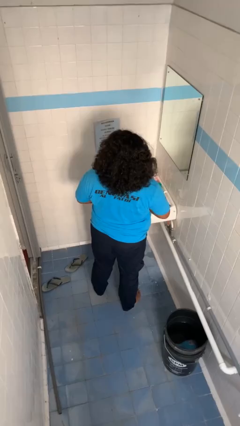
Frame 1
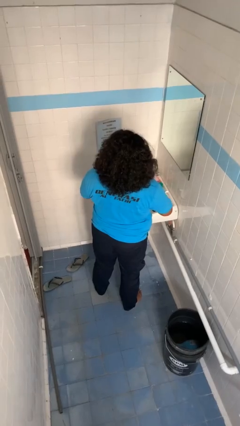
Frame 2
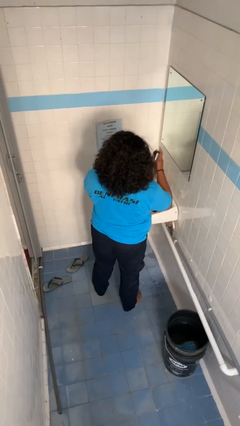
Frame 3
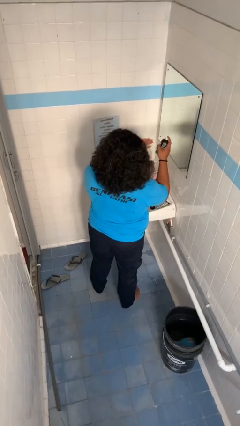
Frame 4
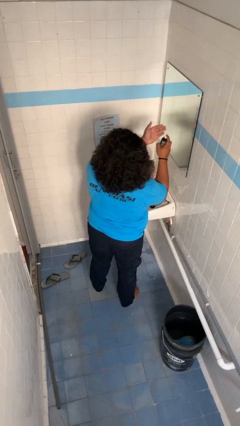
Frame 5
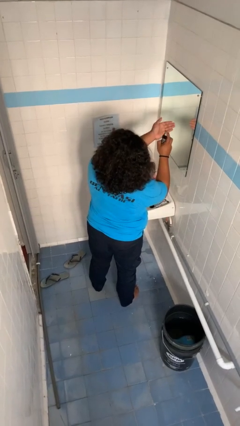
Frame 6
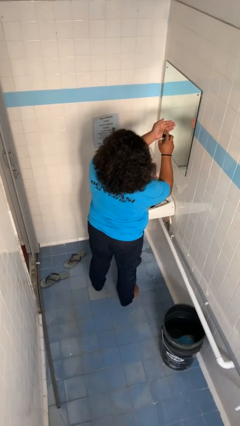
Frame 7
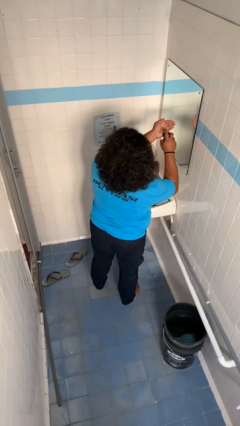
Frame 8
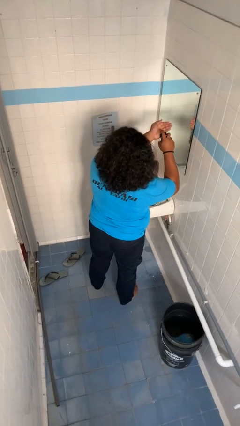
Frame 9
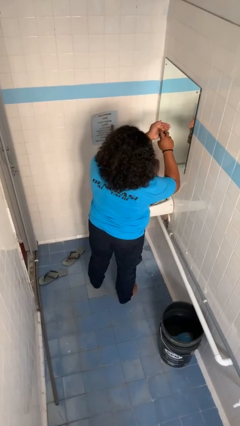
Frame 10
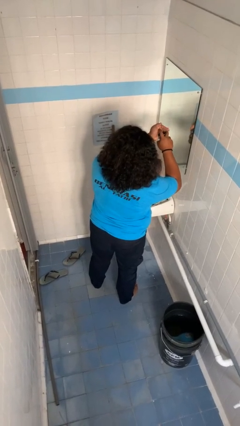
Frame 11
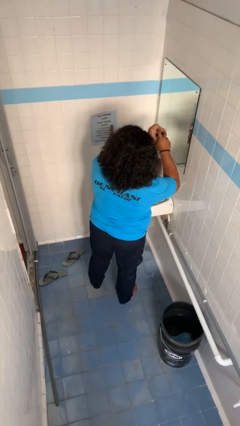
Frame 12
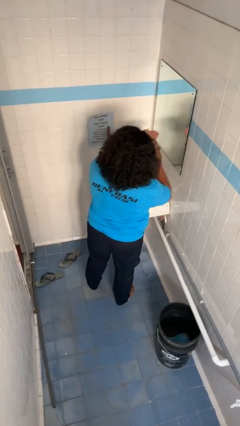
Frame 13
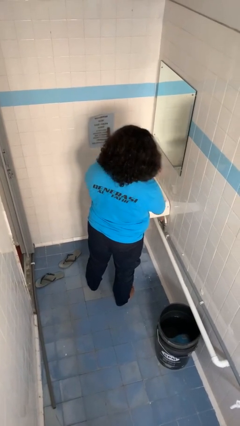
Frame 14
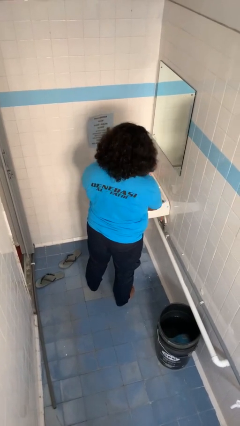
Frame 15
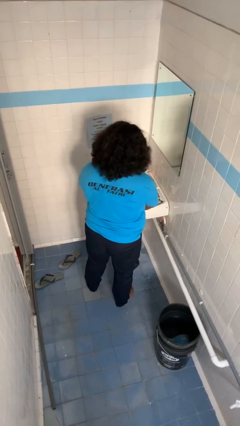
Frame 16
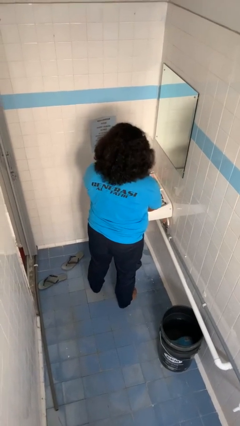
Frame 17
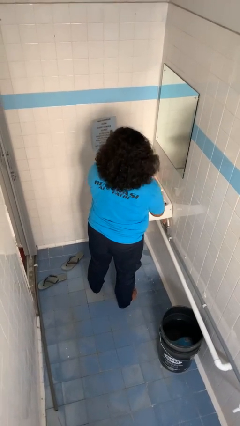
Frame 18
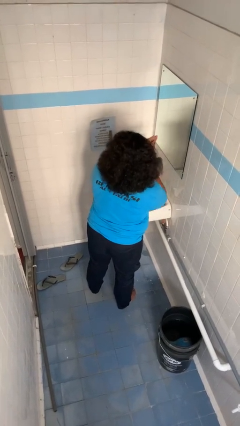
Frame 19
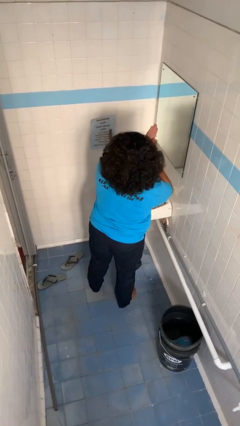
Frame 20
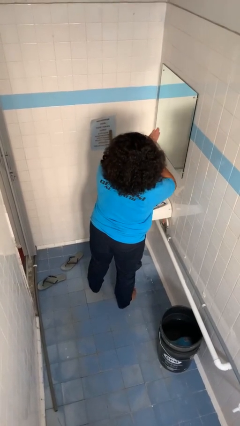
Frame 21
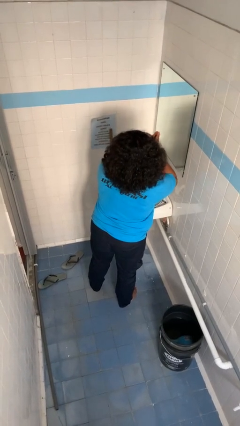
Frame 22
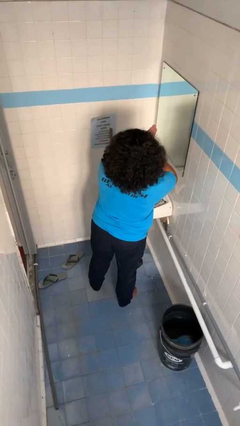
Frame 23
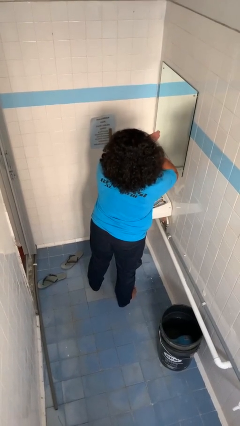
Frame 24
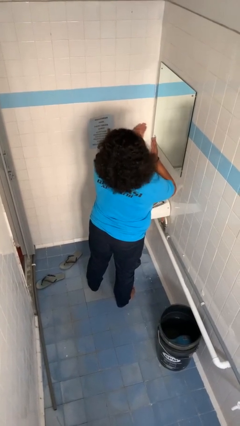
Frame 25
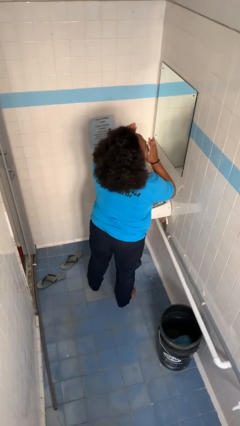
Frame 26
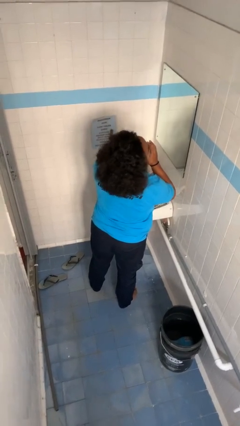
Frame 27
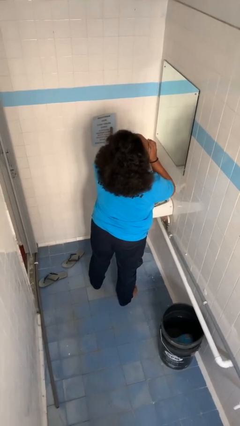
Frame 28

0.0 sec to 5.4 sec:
person applies shaving cream

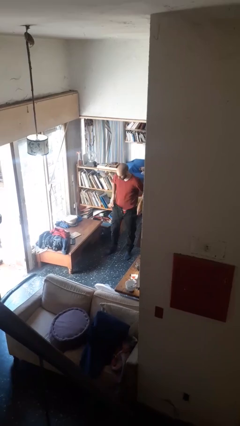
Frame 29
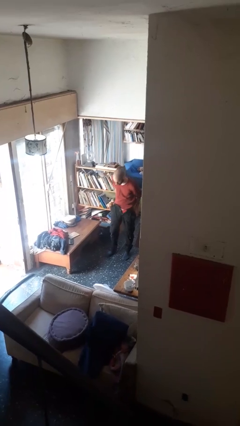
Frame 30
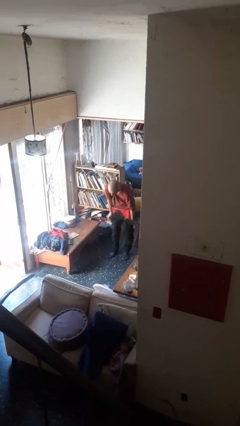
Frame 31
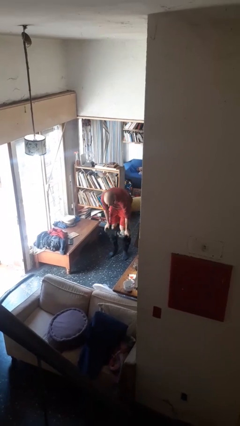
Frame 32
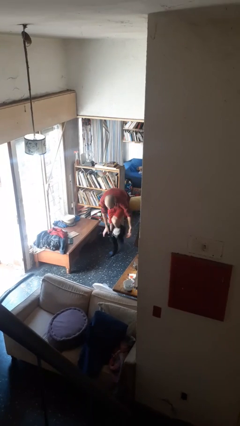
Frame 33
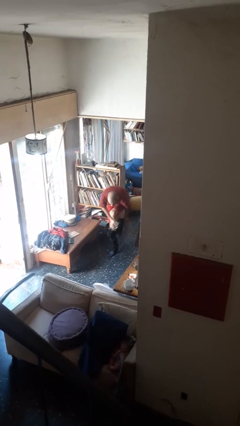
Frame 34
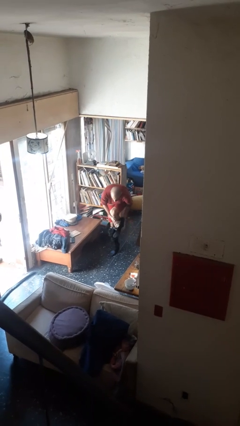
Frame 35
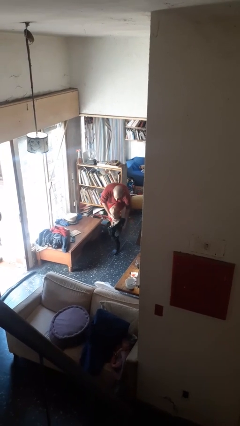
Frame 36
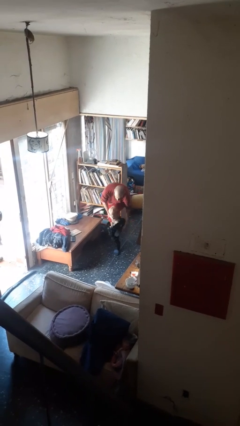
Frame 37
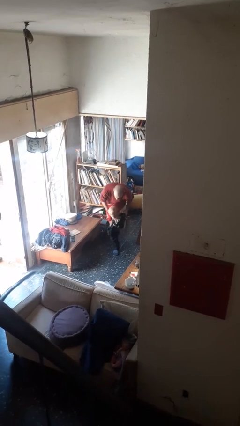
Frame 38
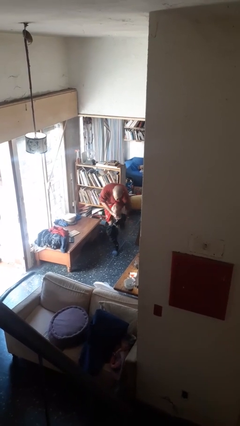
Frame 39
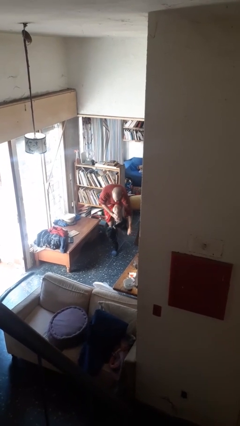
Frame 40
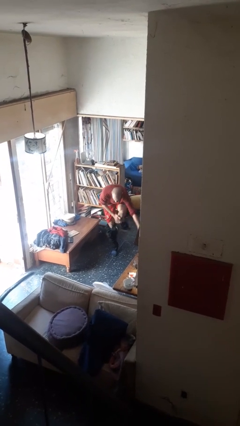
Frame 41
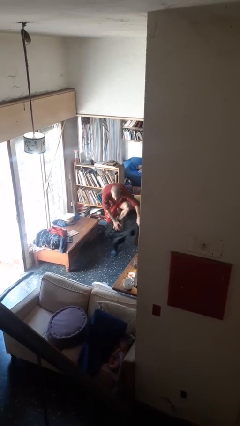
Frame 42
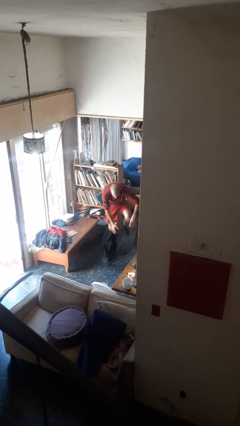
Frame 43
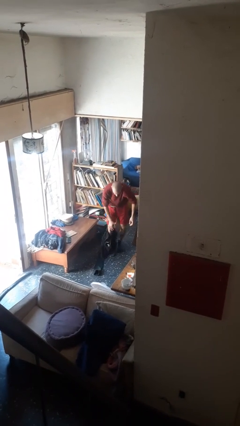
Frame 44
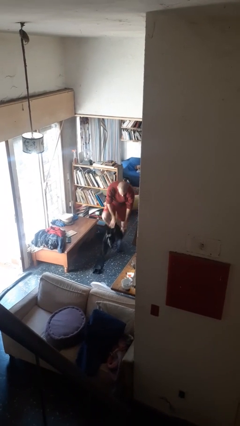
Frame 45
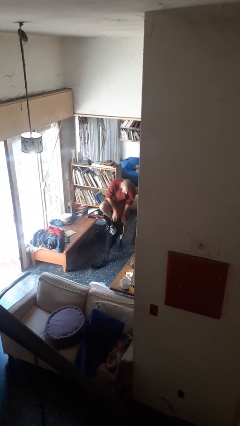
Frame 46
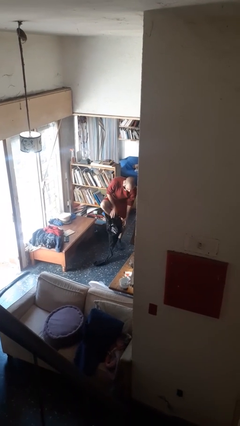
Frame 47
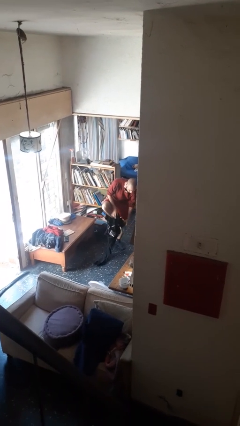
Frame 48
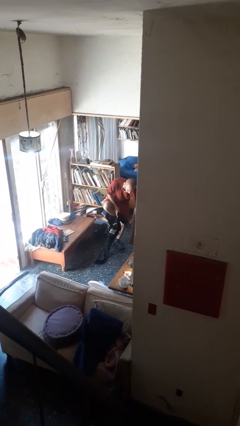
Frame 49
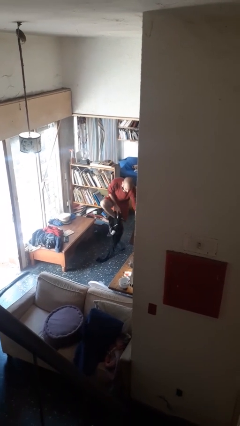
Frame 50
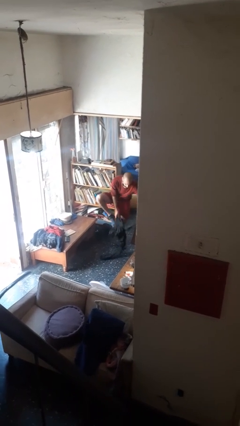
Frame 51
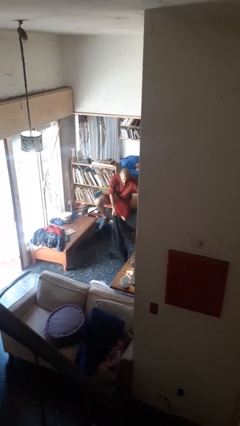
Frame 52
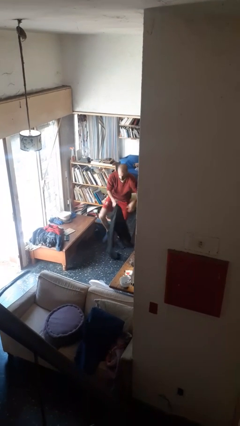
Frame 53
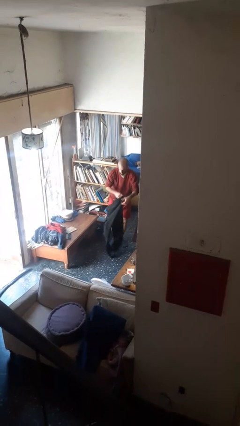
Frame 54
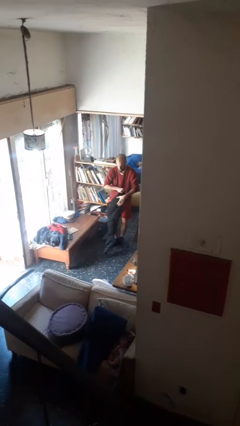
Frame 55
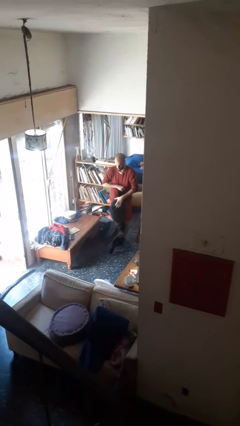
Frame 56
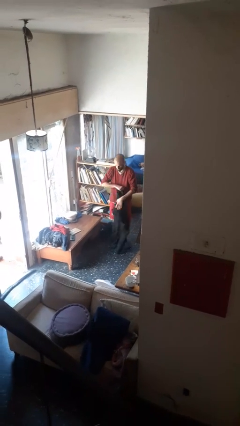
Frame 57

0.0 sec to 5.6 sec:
person takes off pants

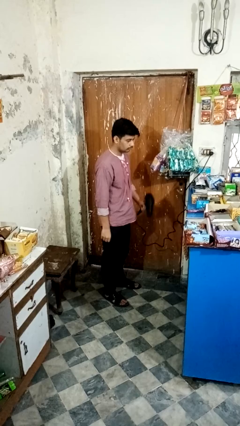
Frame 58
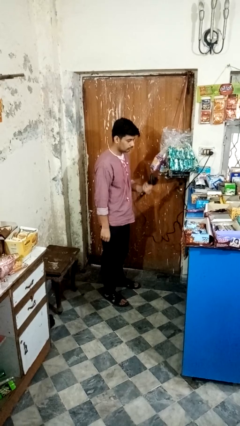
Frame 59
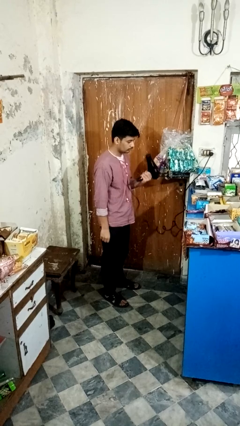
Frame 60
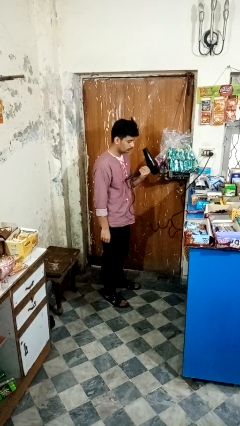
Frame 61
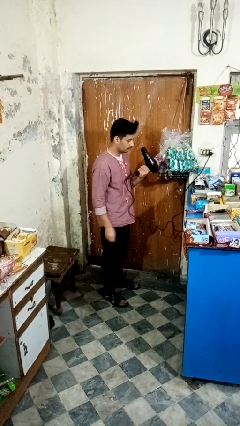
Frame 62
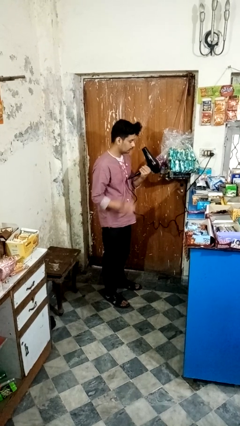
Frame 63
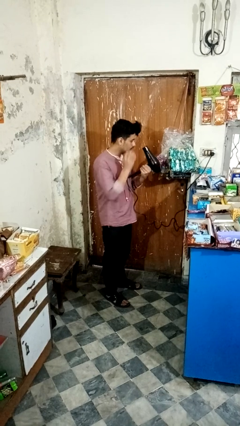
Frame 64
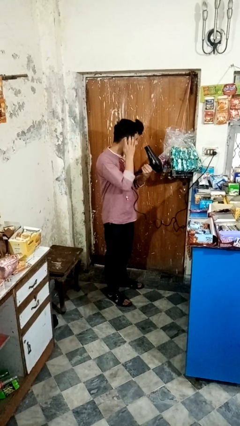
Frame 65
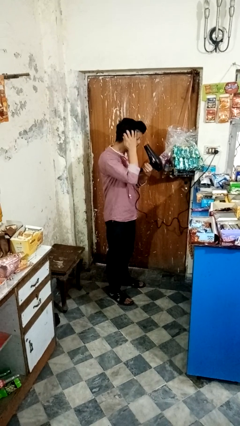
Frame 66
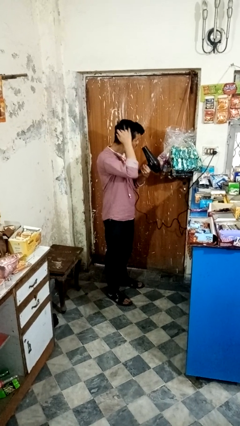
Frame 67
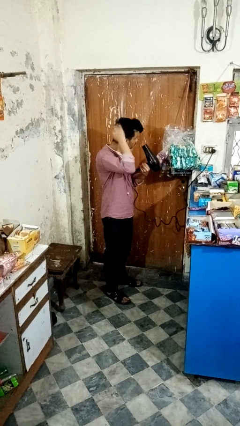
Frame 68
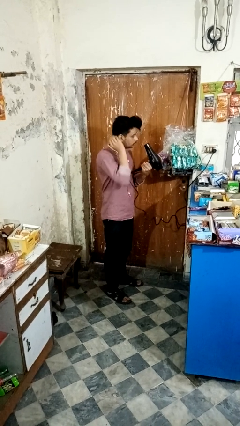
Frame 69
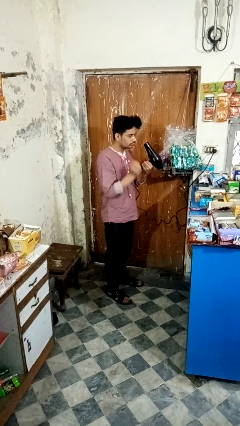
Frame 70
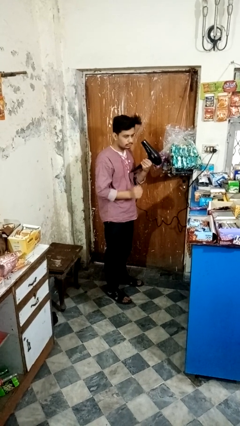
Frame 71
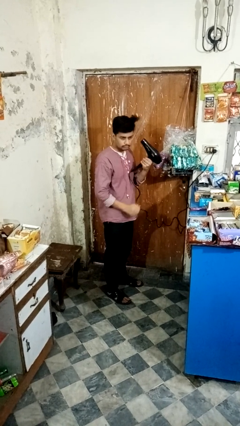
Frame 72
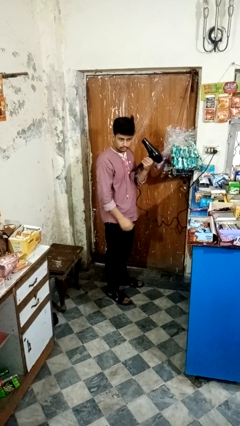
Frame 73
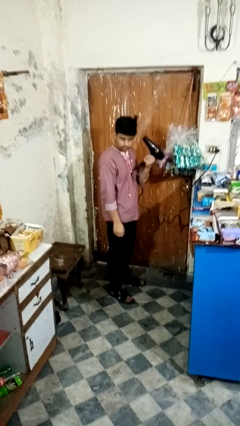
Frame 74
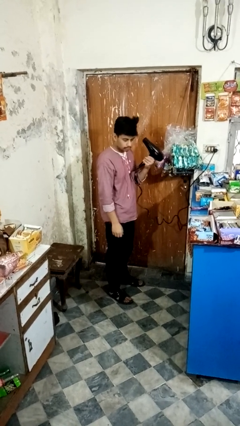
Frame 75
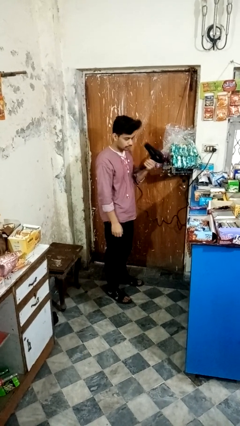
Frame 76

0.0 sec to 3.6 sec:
person dries hair with hairdryer

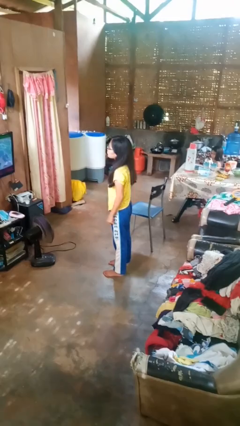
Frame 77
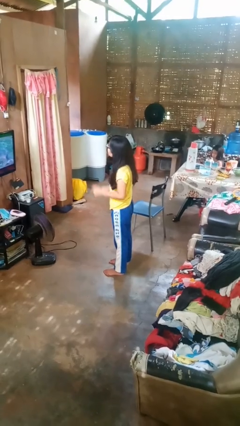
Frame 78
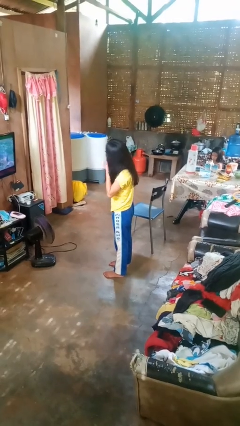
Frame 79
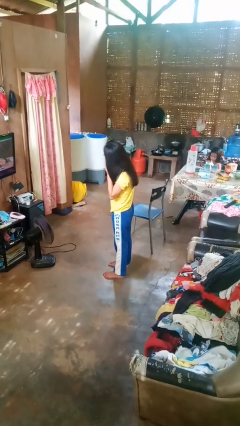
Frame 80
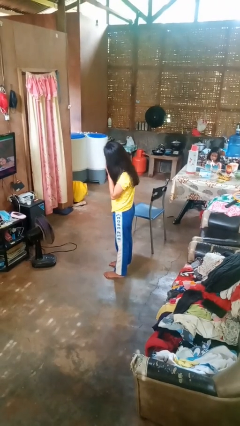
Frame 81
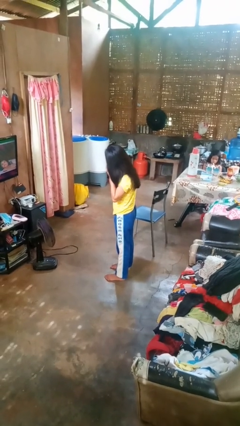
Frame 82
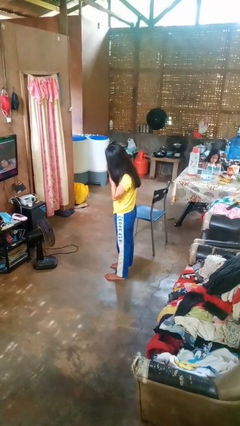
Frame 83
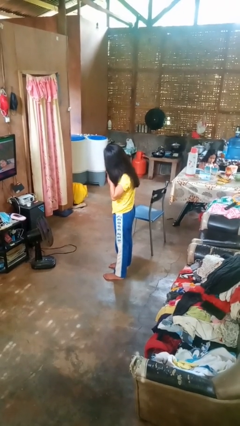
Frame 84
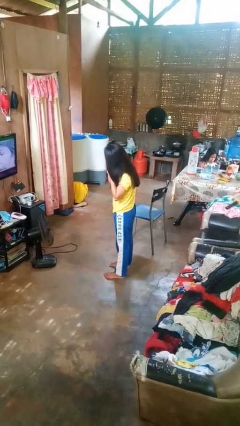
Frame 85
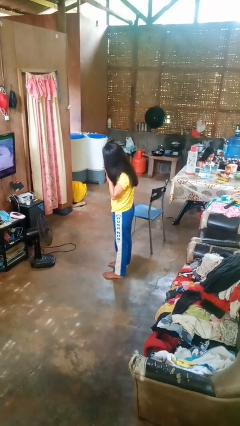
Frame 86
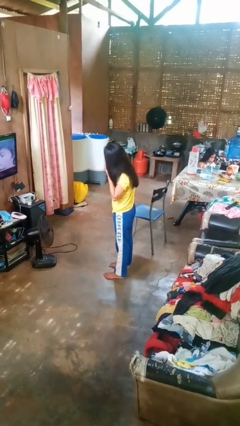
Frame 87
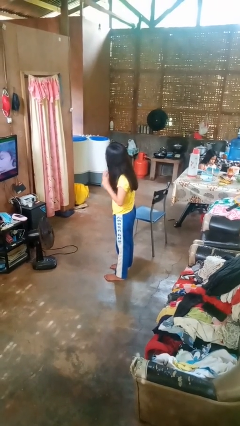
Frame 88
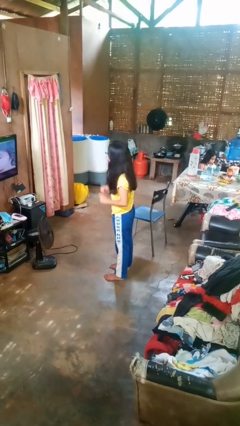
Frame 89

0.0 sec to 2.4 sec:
person takes off earrings

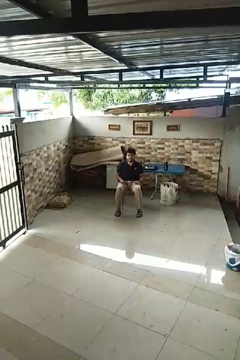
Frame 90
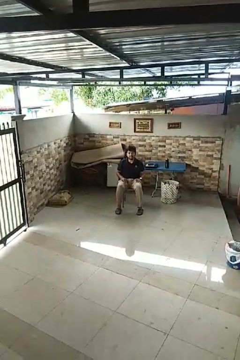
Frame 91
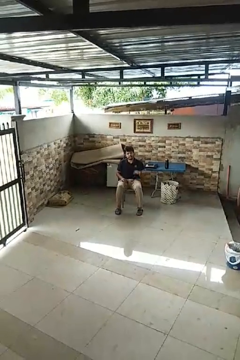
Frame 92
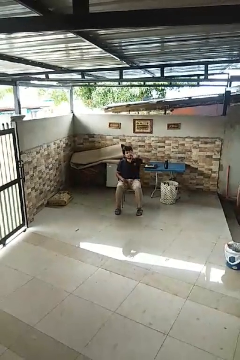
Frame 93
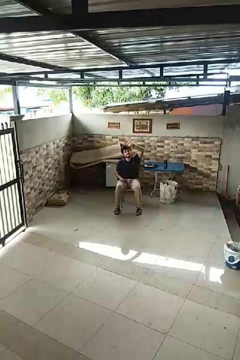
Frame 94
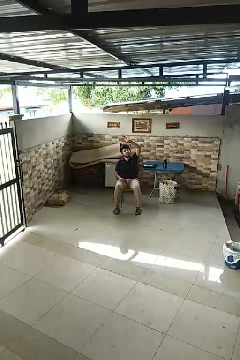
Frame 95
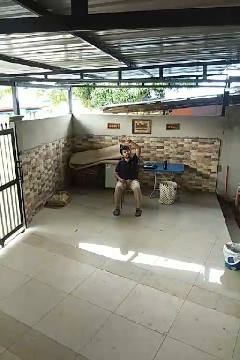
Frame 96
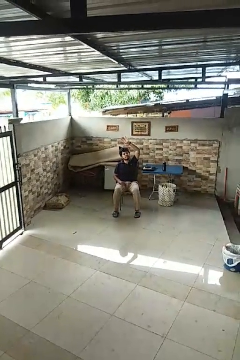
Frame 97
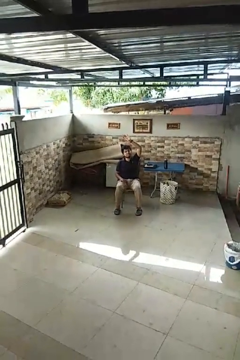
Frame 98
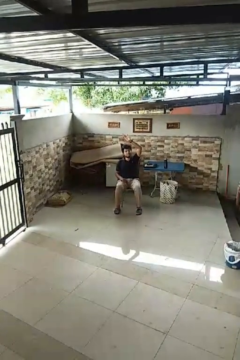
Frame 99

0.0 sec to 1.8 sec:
person gestures raise hand
